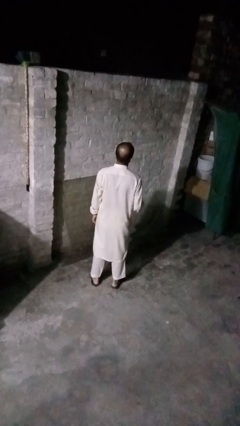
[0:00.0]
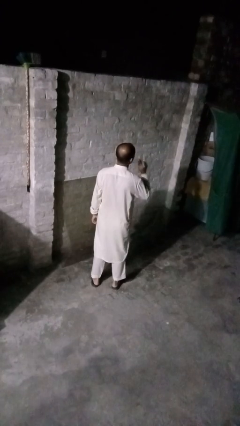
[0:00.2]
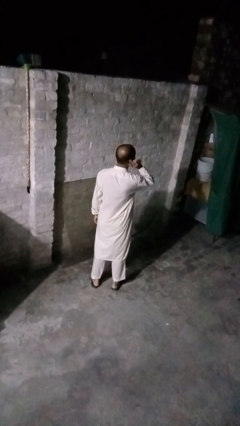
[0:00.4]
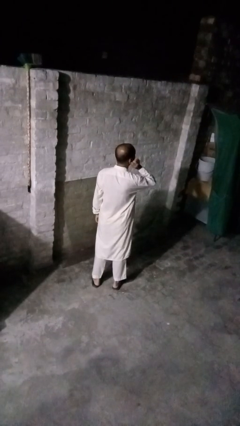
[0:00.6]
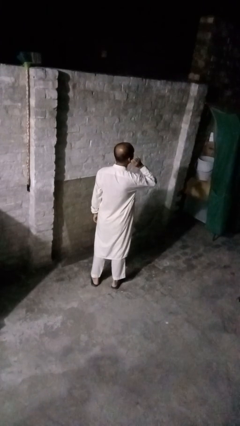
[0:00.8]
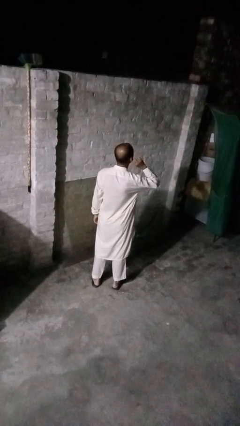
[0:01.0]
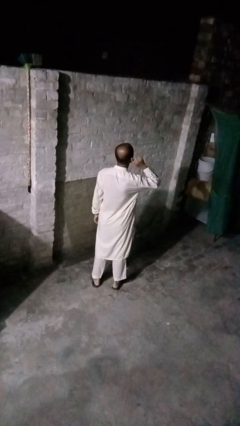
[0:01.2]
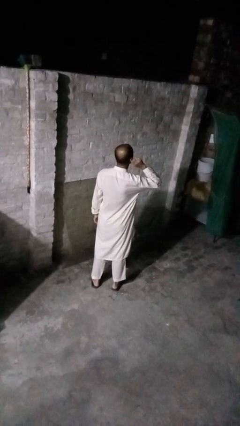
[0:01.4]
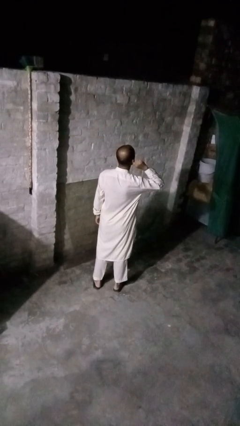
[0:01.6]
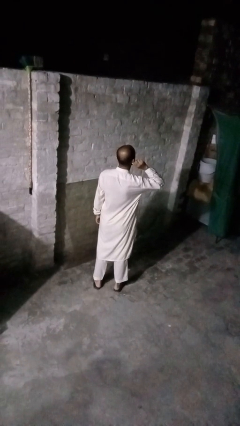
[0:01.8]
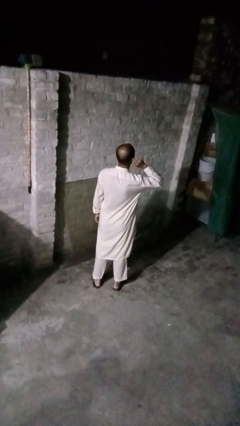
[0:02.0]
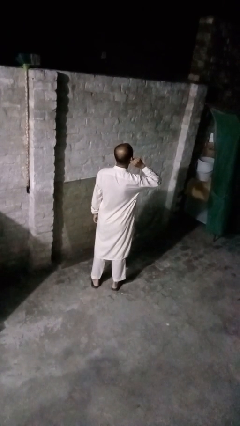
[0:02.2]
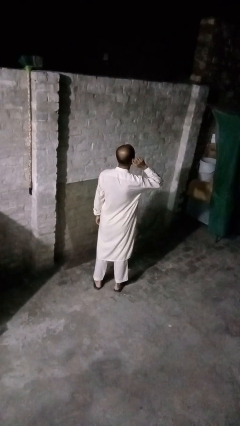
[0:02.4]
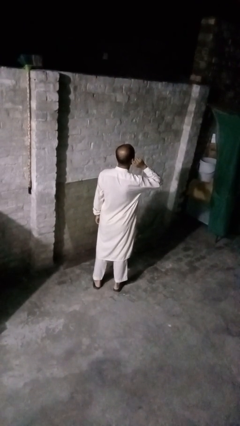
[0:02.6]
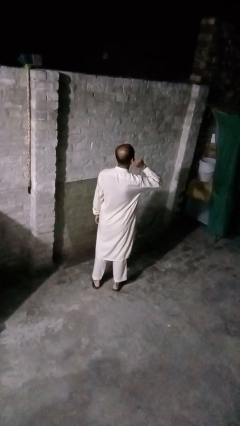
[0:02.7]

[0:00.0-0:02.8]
person touches earlobe

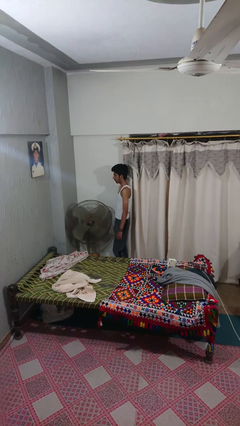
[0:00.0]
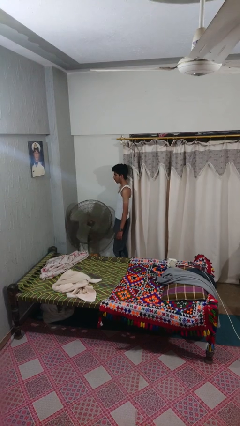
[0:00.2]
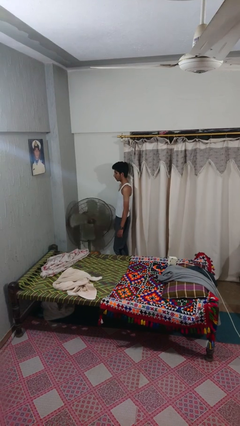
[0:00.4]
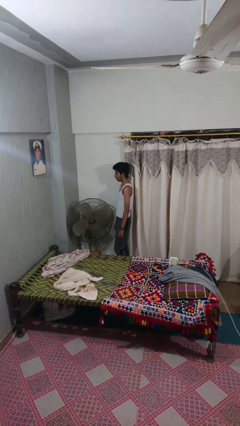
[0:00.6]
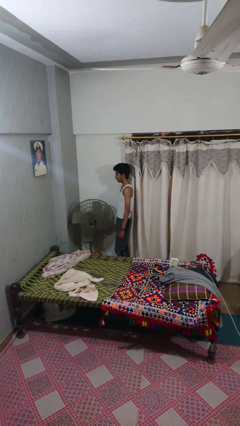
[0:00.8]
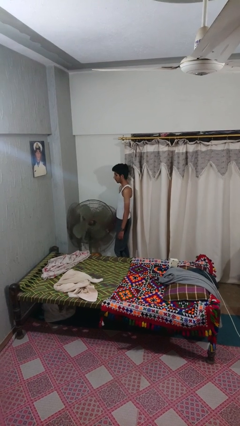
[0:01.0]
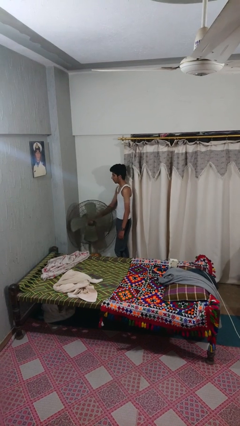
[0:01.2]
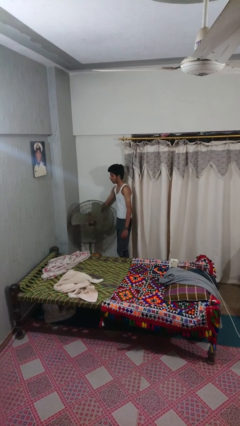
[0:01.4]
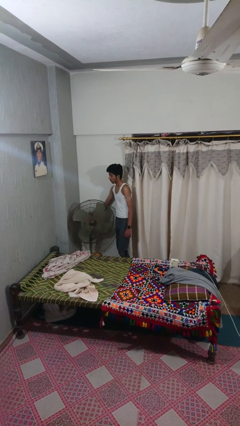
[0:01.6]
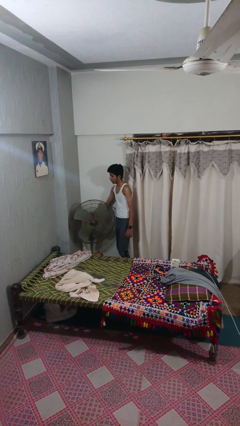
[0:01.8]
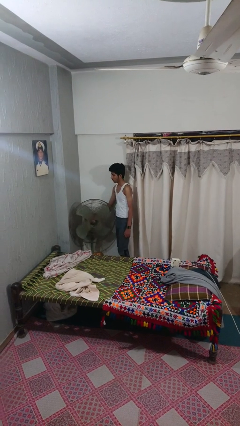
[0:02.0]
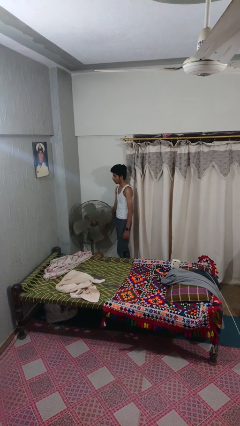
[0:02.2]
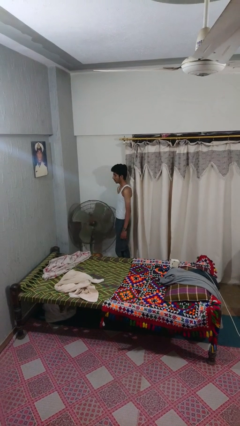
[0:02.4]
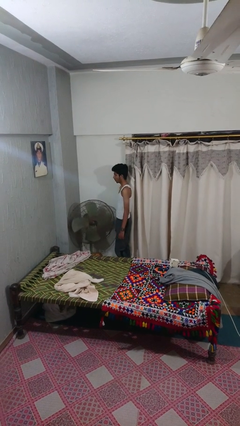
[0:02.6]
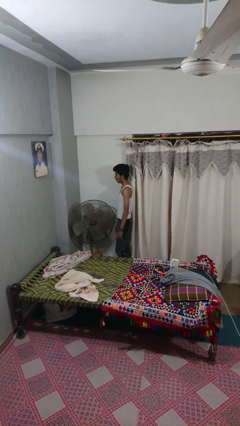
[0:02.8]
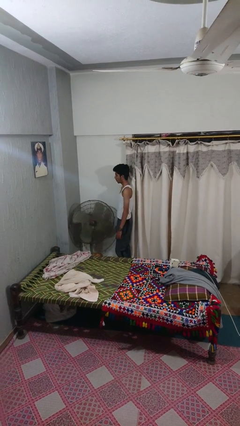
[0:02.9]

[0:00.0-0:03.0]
person turns on fan

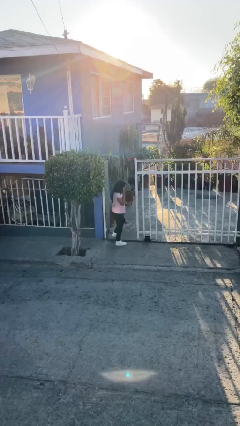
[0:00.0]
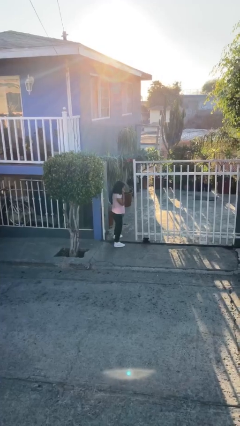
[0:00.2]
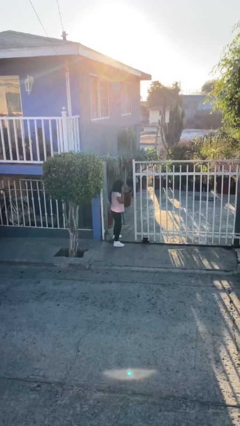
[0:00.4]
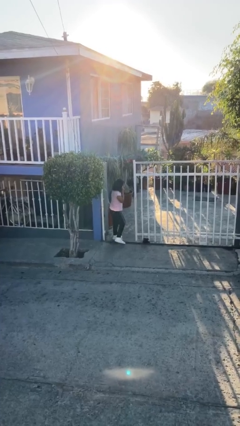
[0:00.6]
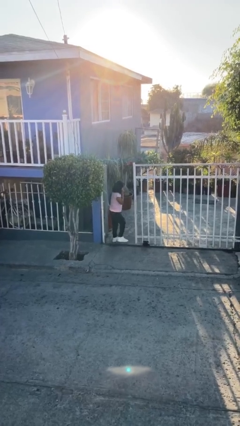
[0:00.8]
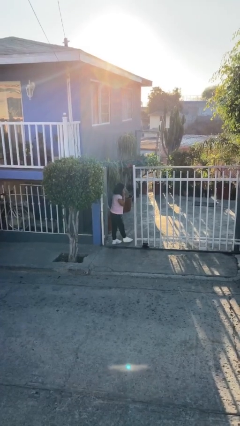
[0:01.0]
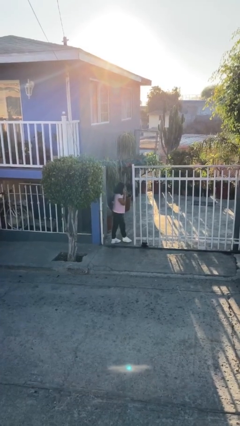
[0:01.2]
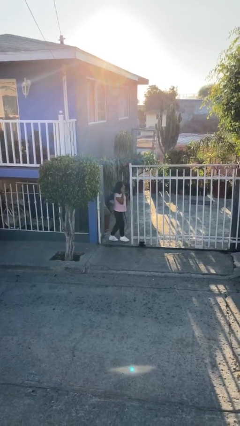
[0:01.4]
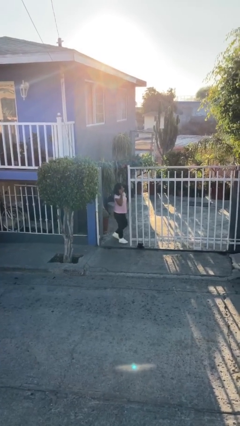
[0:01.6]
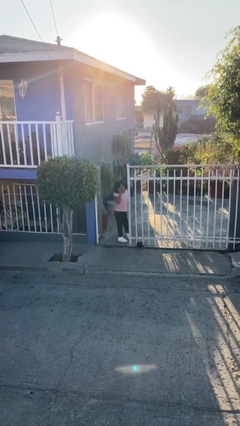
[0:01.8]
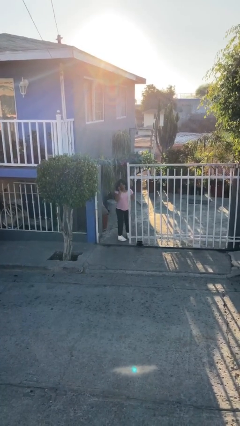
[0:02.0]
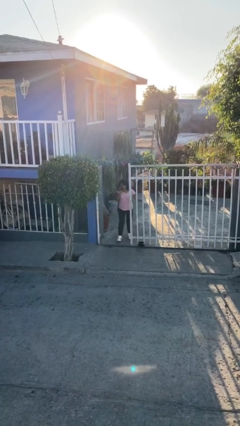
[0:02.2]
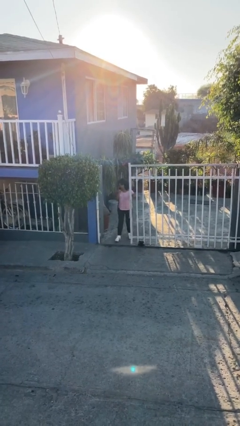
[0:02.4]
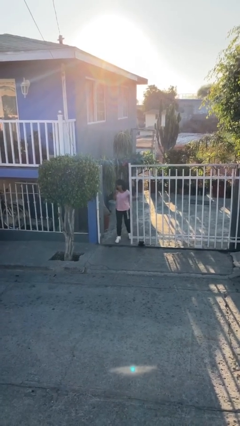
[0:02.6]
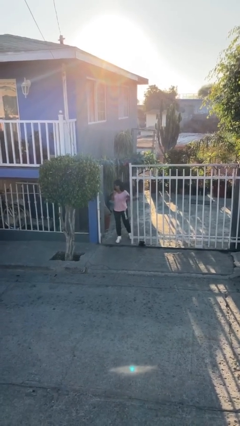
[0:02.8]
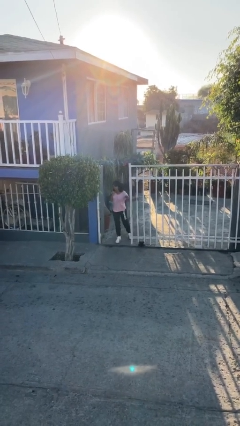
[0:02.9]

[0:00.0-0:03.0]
person exits scene through structure

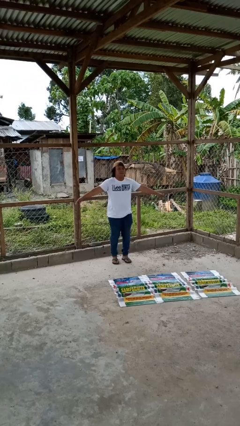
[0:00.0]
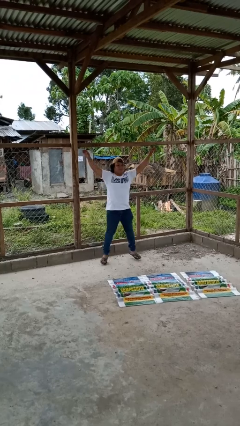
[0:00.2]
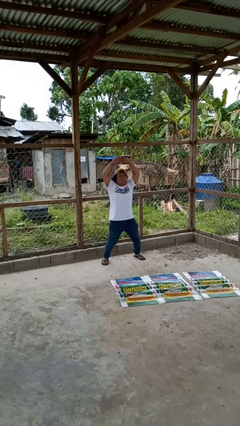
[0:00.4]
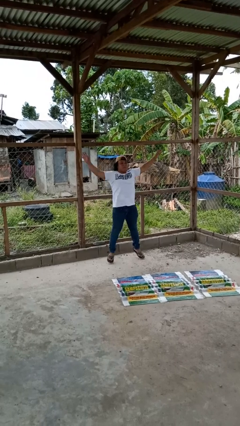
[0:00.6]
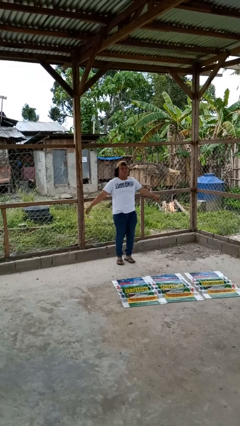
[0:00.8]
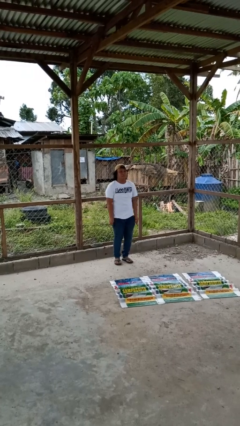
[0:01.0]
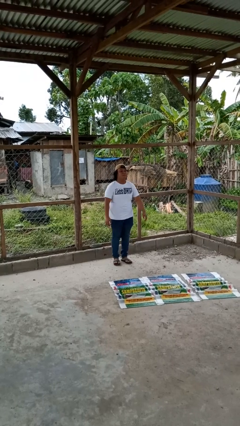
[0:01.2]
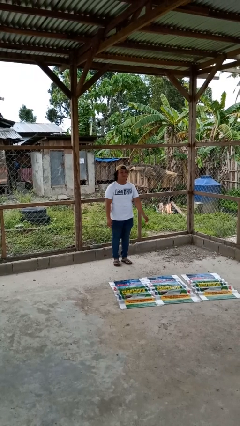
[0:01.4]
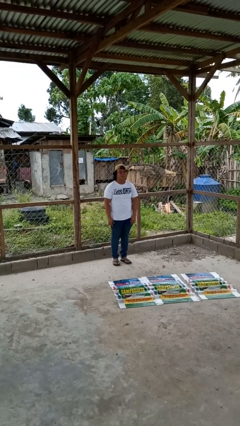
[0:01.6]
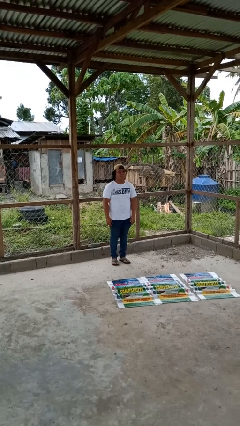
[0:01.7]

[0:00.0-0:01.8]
person exercises with jumping jacks

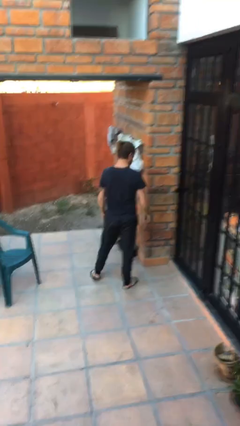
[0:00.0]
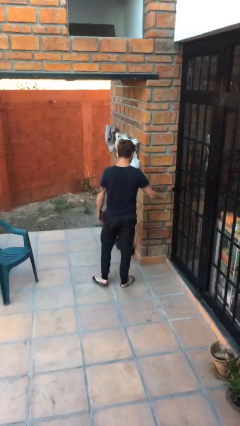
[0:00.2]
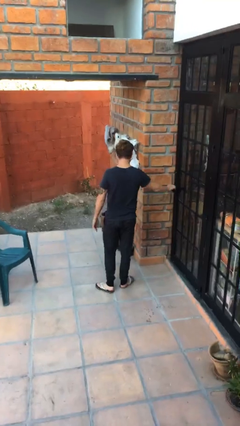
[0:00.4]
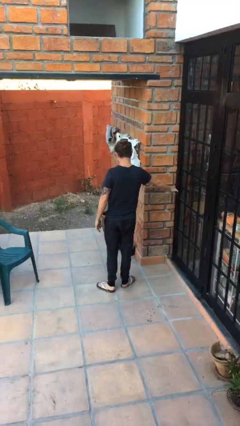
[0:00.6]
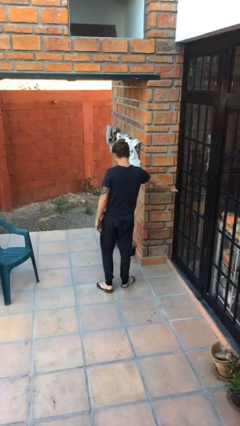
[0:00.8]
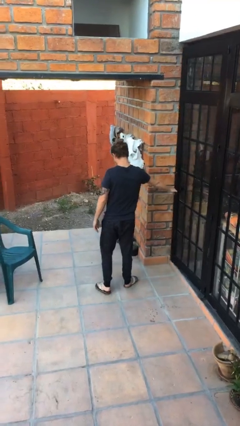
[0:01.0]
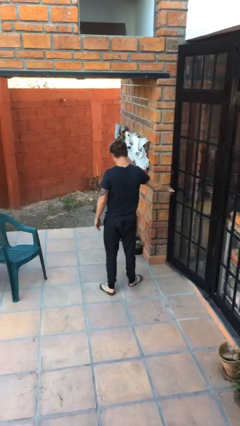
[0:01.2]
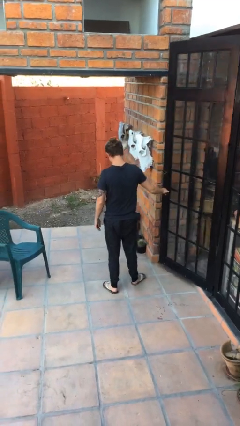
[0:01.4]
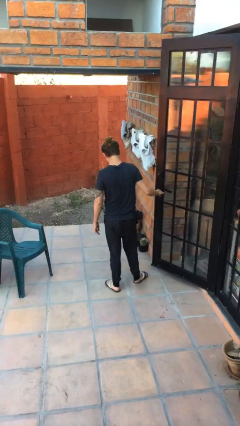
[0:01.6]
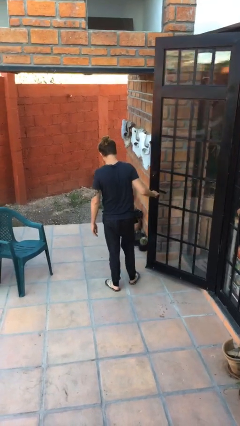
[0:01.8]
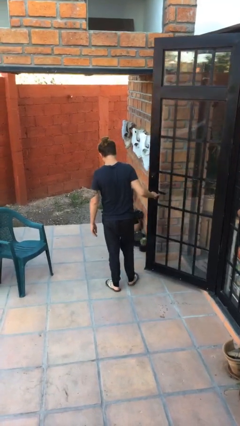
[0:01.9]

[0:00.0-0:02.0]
person opens facility door

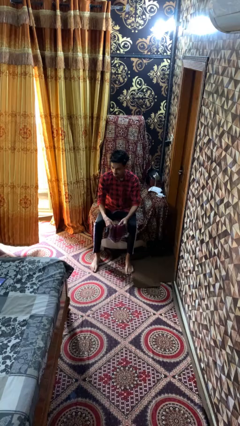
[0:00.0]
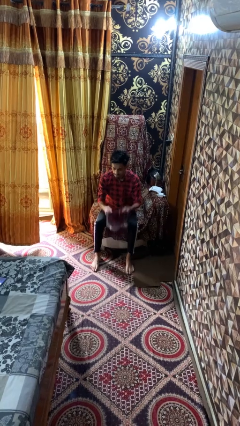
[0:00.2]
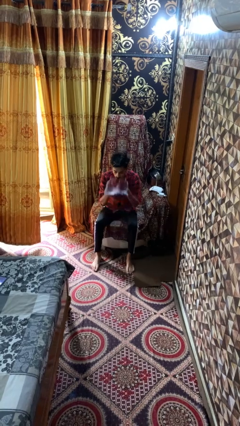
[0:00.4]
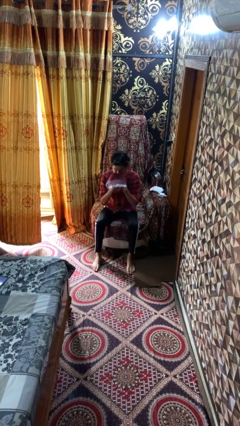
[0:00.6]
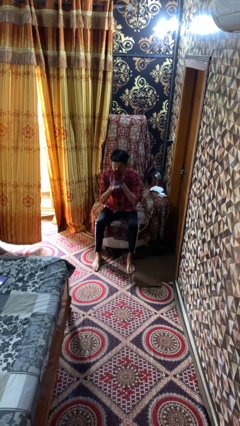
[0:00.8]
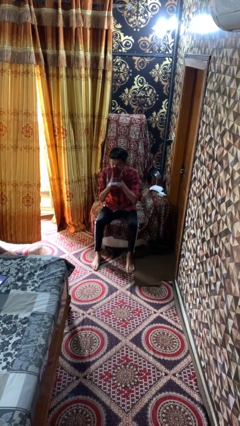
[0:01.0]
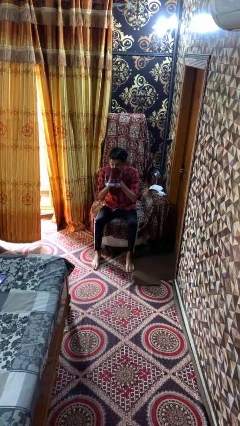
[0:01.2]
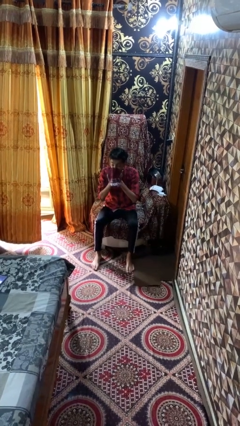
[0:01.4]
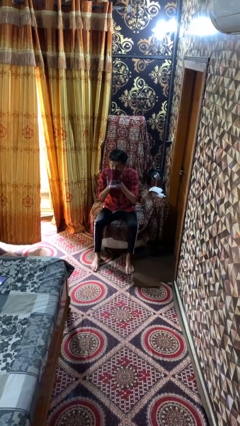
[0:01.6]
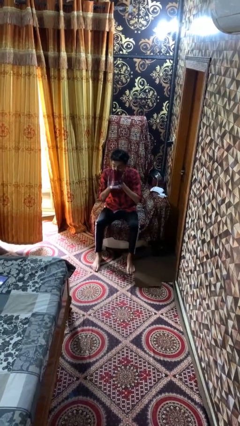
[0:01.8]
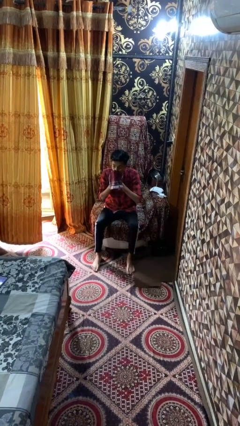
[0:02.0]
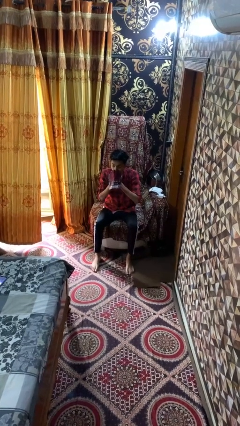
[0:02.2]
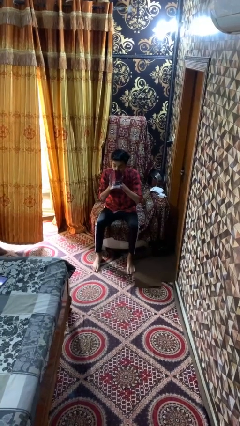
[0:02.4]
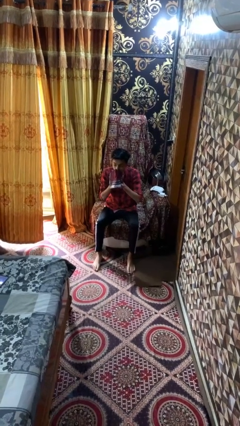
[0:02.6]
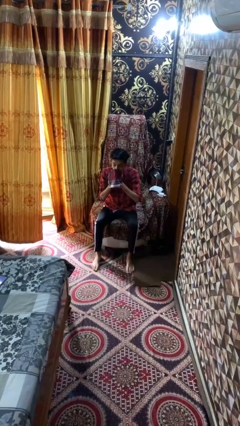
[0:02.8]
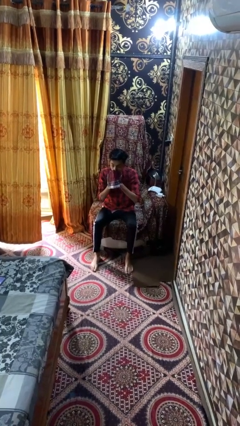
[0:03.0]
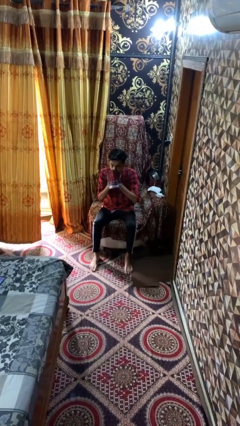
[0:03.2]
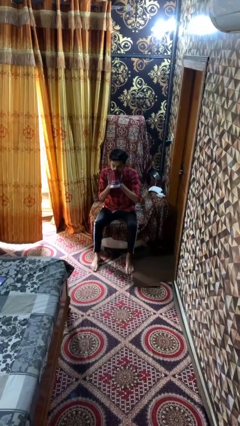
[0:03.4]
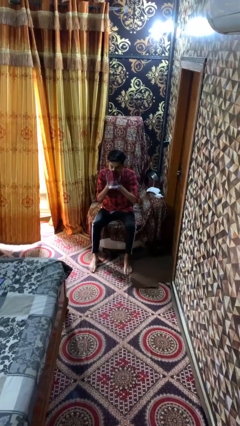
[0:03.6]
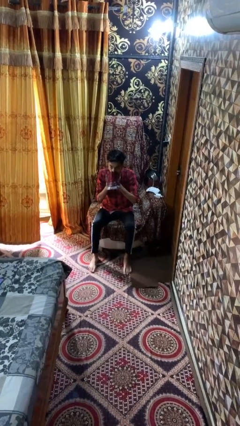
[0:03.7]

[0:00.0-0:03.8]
person blows nose

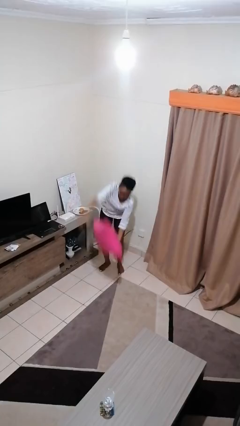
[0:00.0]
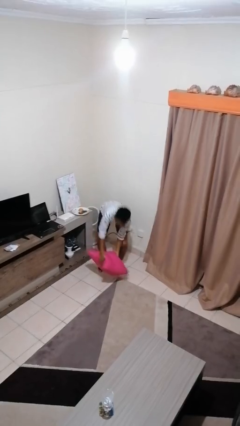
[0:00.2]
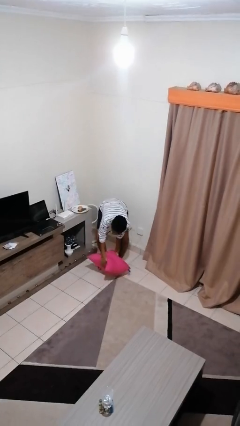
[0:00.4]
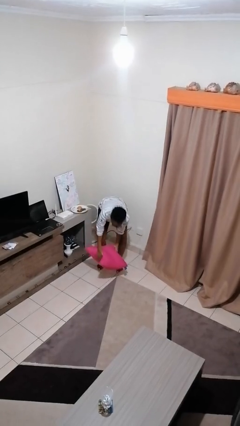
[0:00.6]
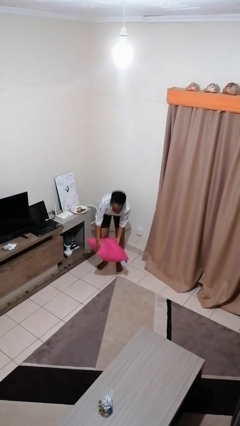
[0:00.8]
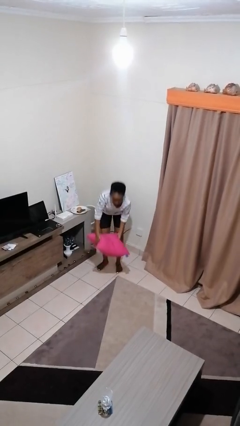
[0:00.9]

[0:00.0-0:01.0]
person catches dropped object
